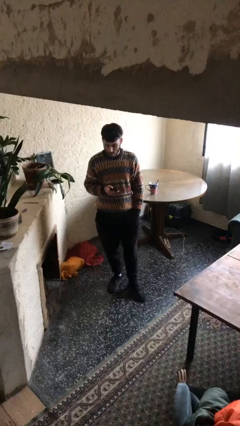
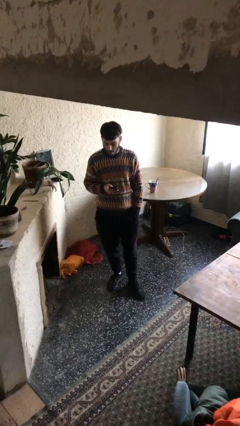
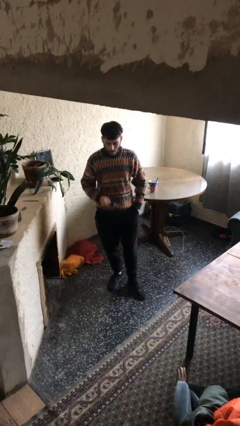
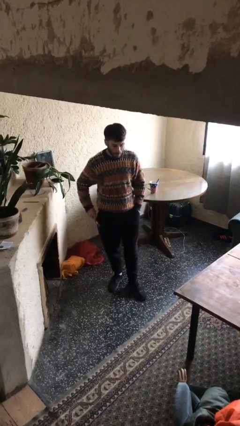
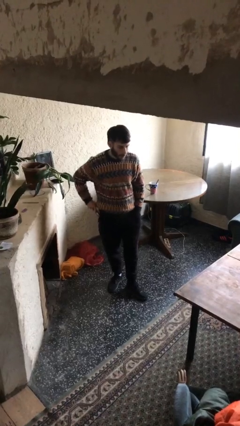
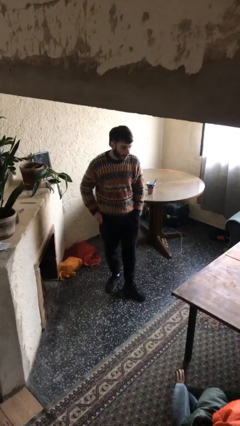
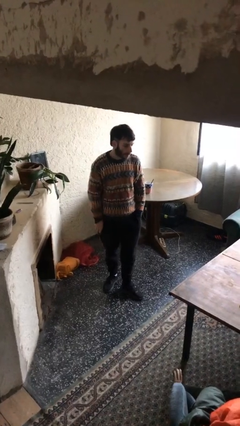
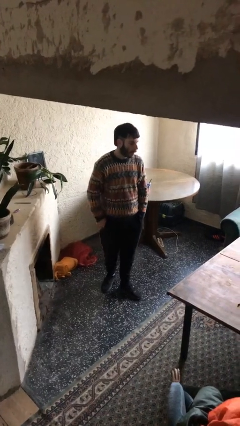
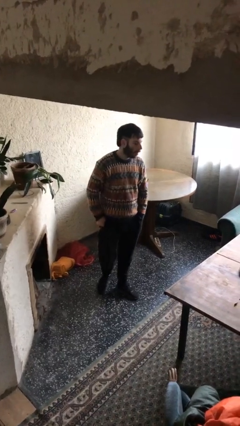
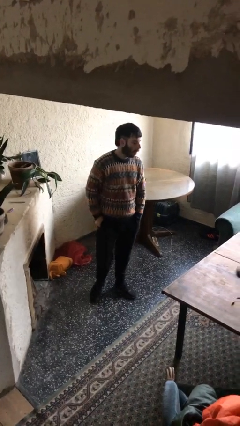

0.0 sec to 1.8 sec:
person puts phone into pocket

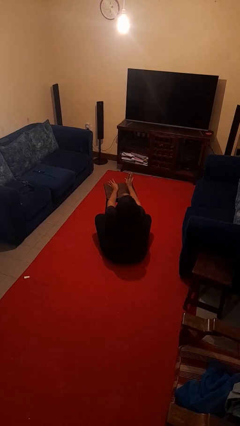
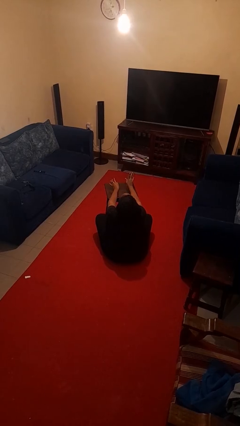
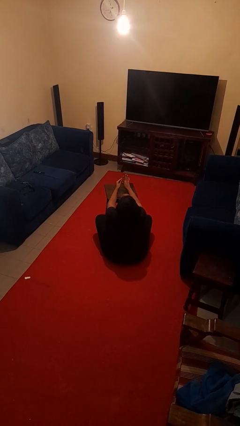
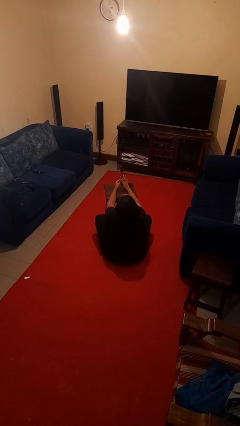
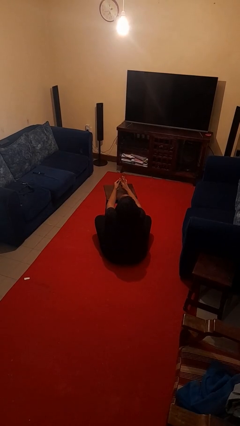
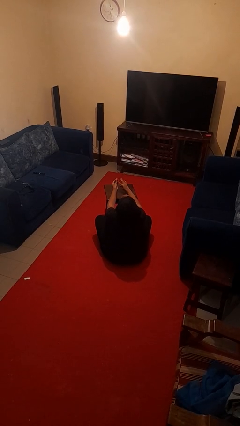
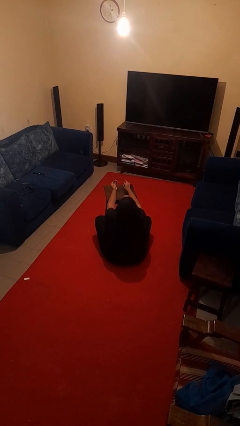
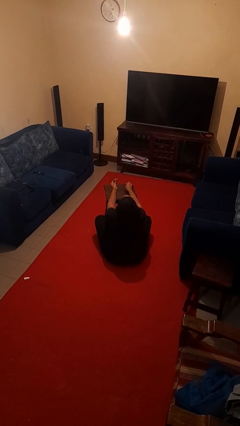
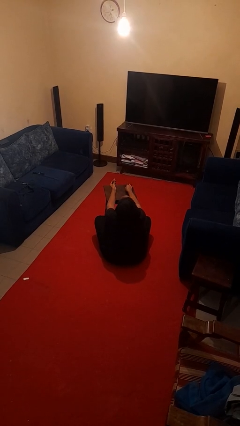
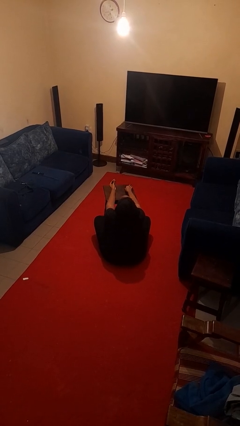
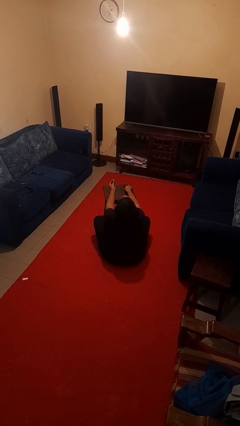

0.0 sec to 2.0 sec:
person takes off ring

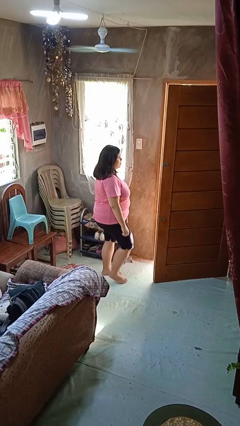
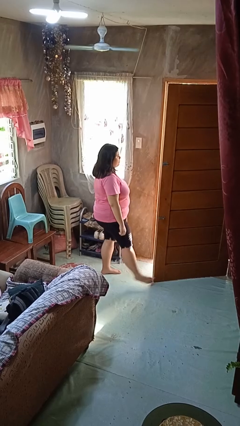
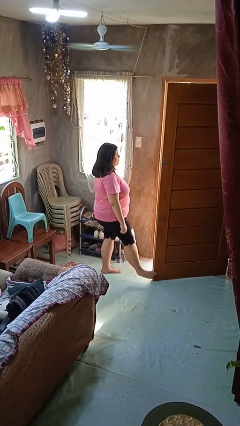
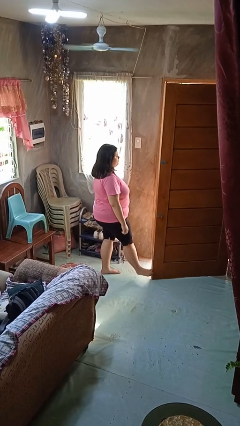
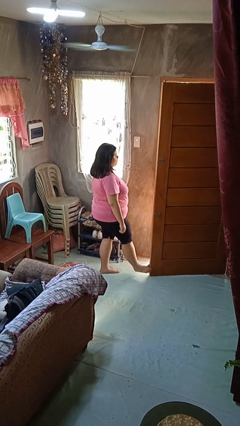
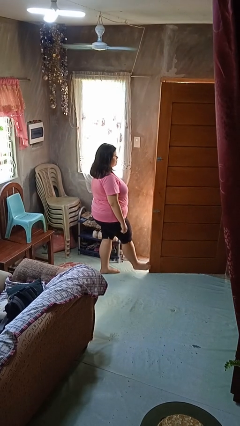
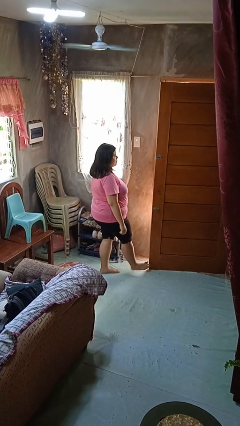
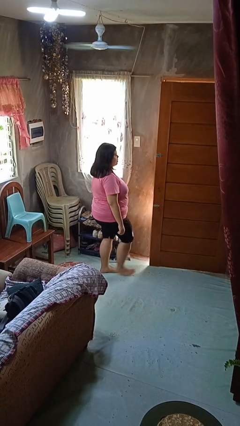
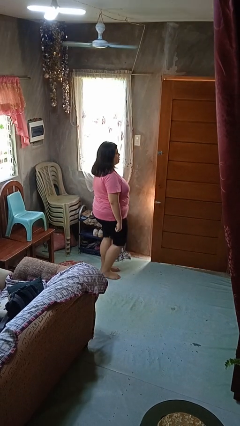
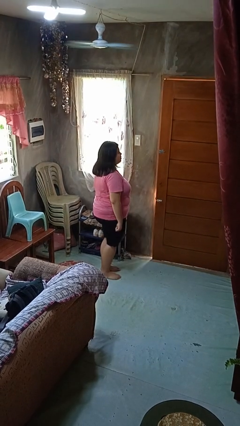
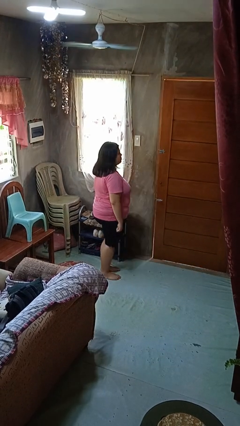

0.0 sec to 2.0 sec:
person closes door with foot

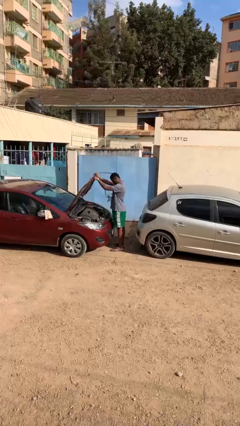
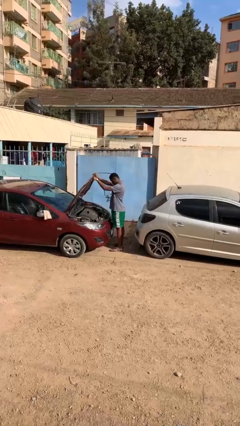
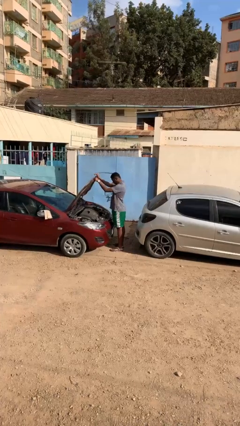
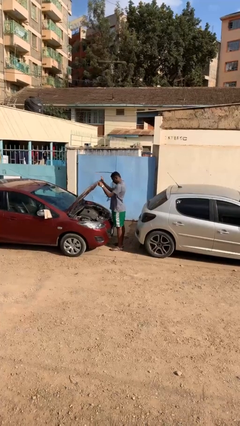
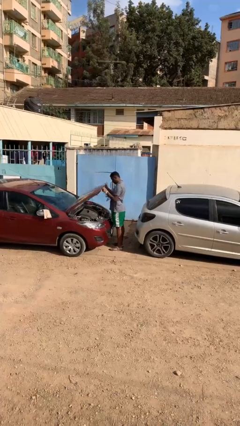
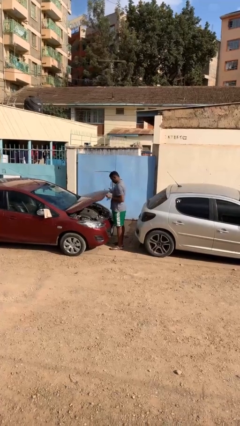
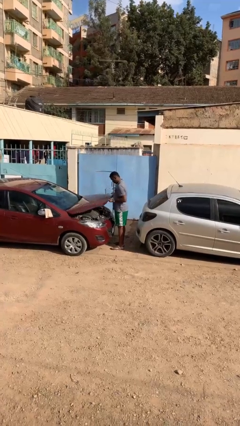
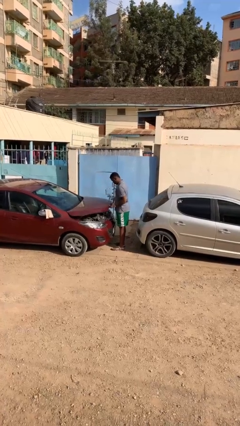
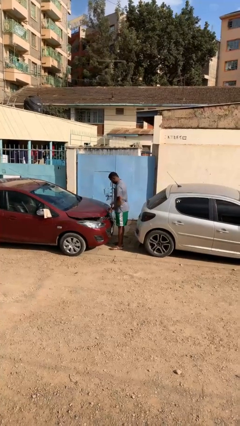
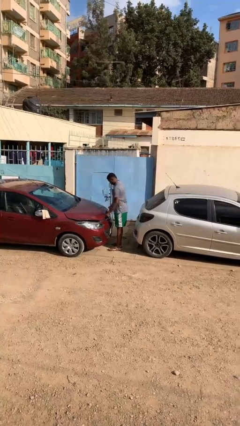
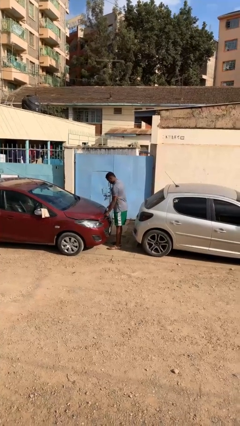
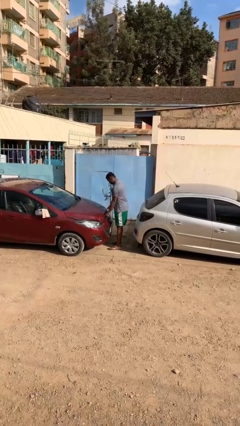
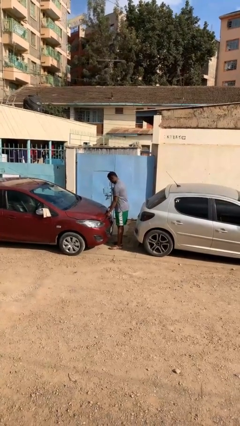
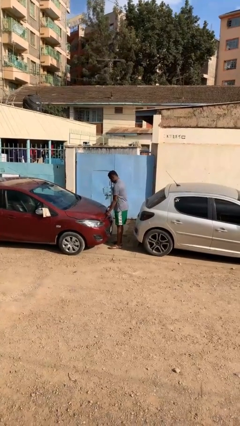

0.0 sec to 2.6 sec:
person closes car hood

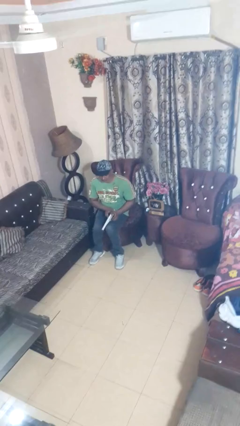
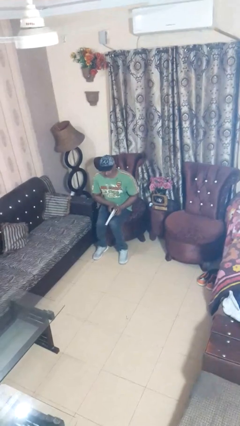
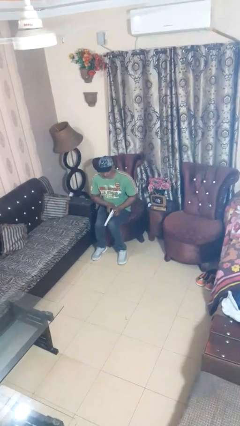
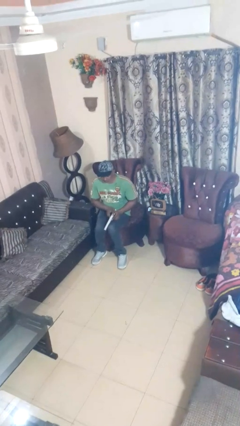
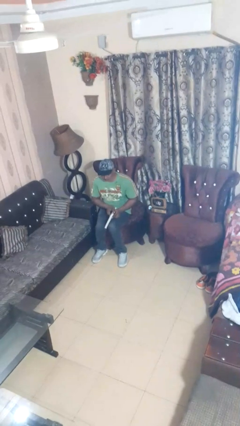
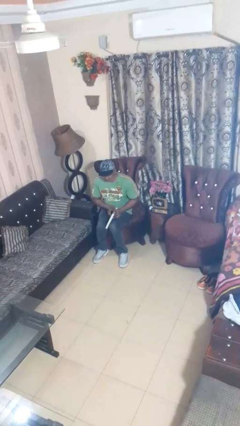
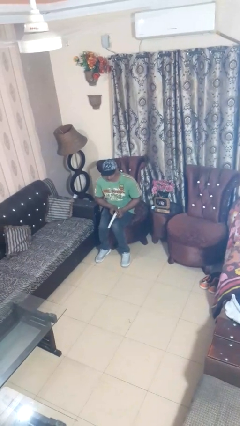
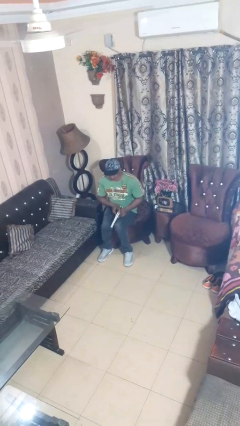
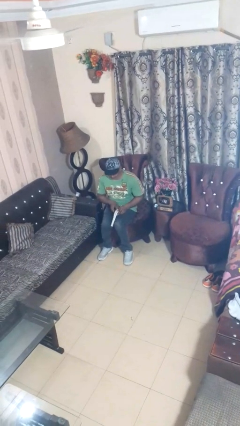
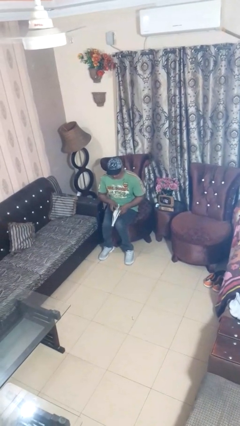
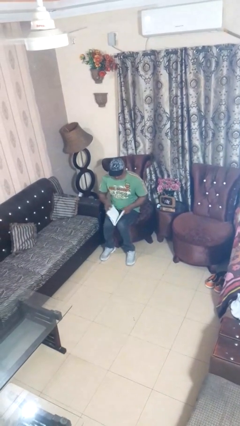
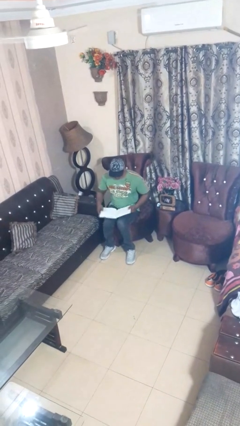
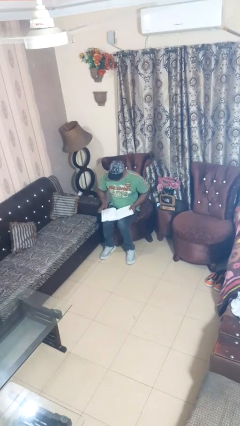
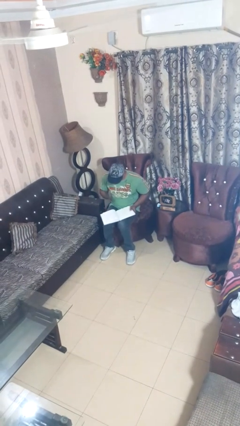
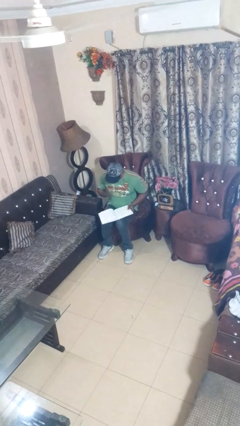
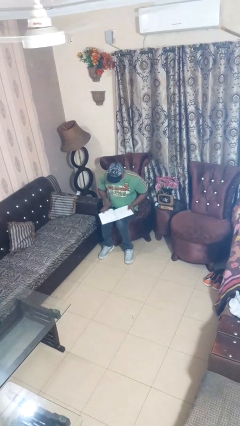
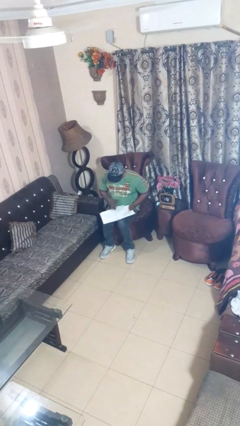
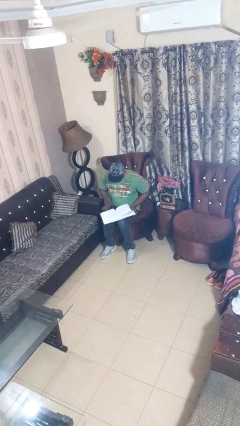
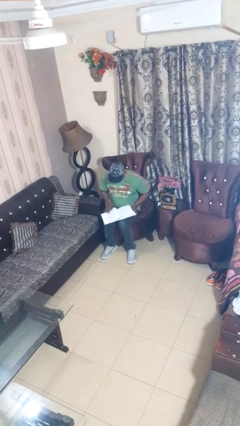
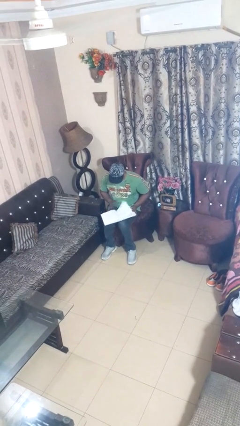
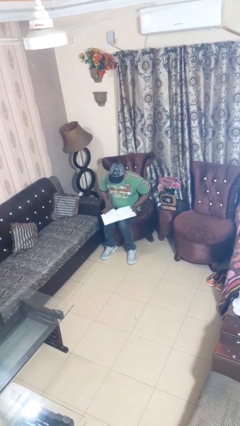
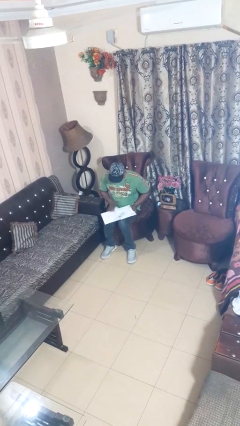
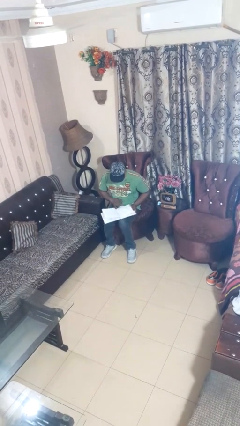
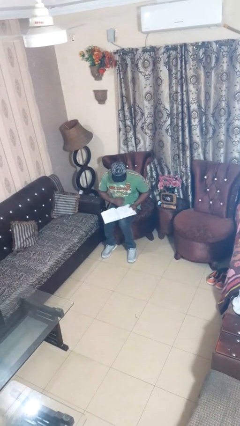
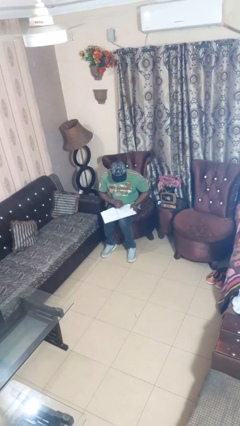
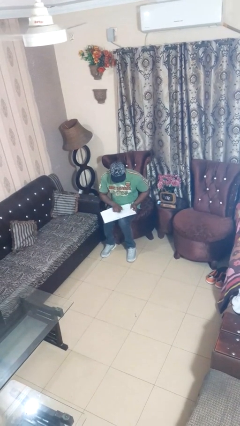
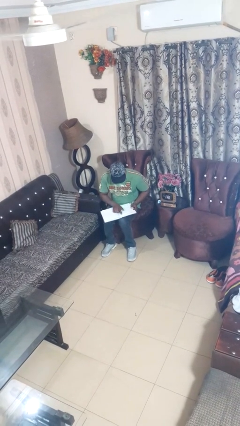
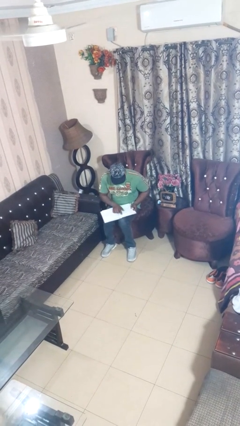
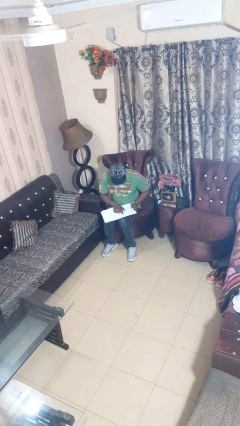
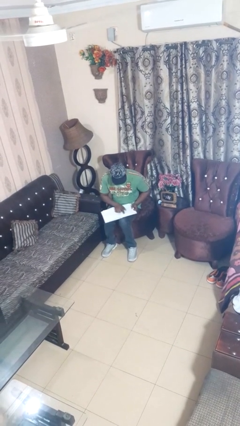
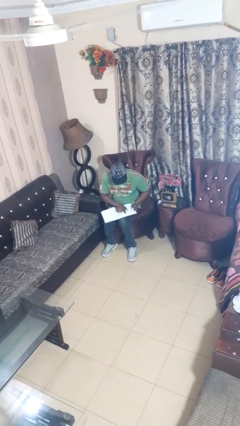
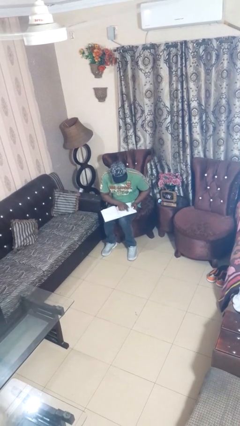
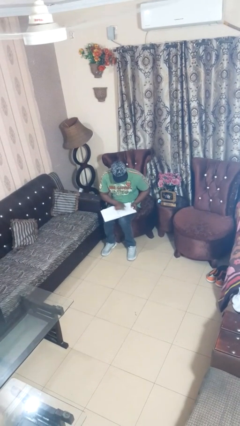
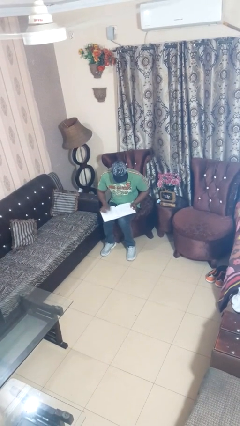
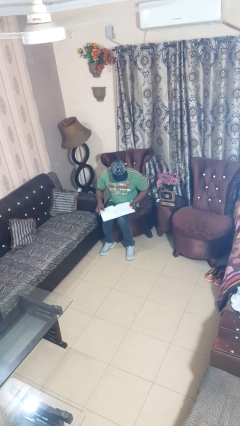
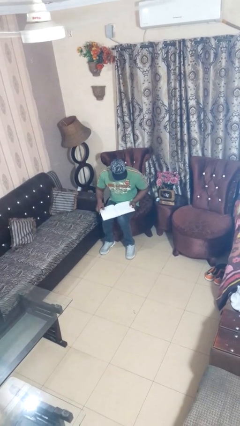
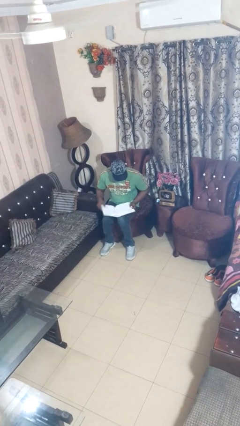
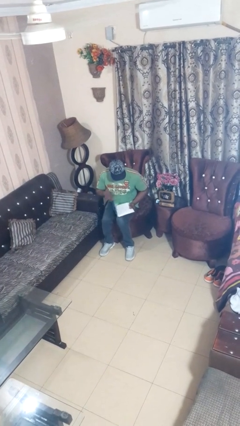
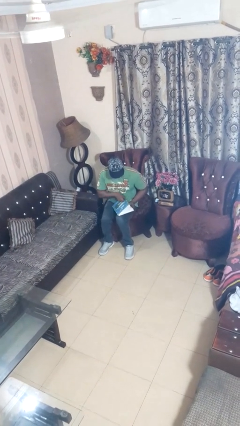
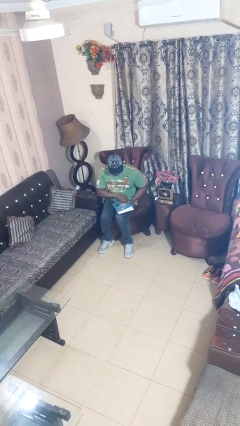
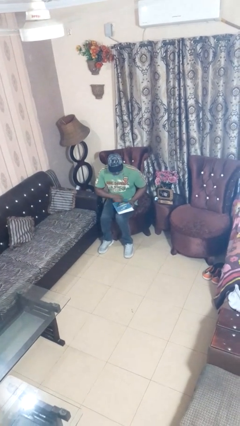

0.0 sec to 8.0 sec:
person reads magazine

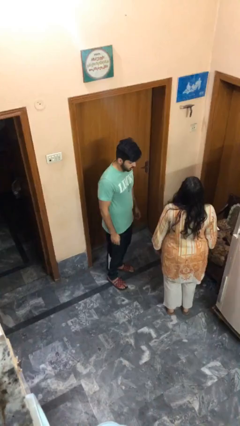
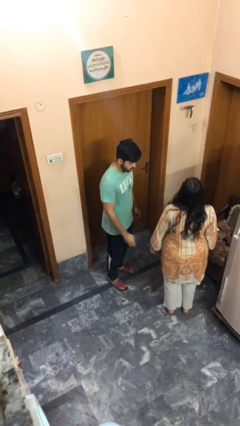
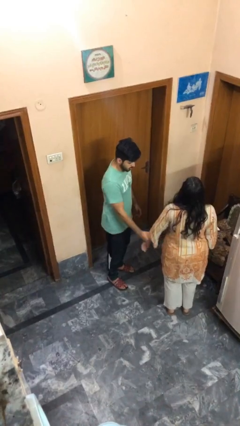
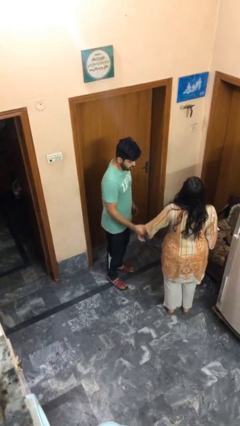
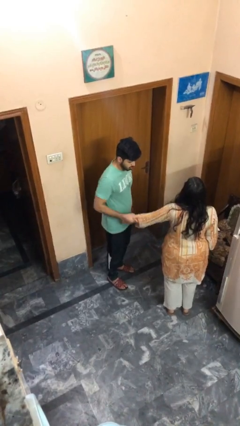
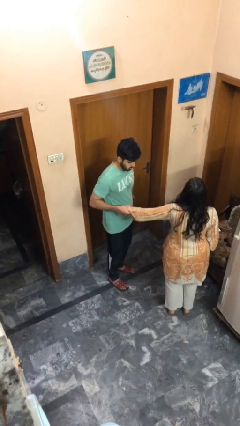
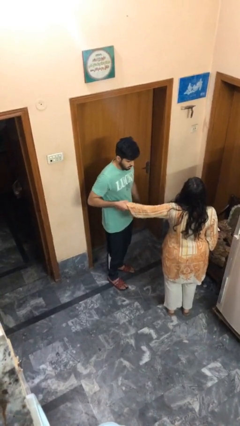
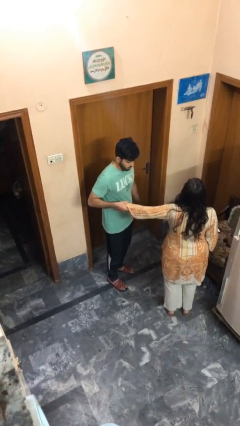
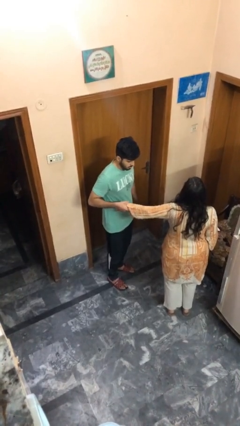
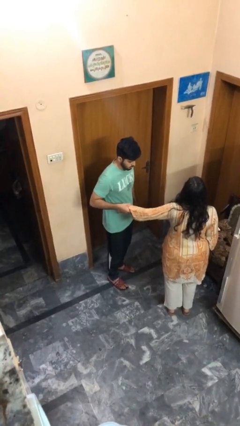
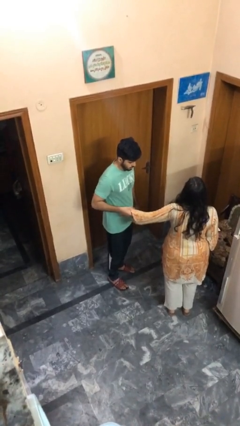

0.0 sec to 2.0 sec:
person grabs person by forearm
